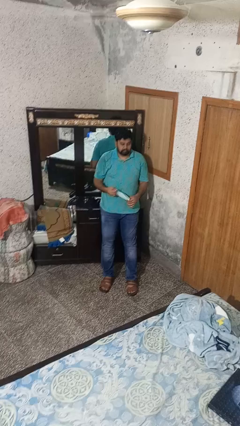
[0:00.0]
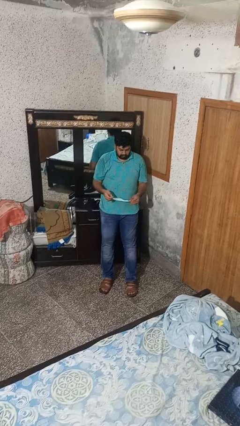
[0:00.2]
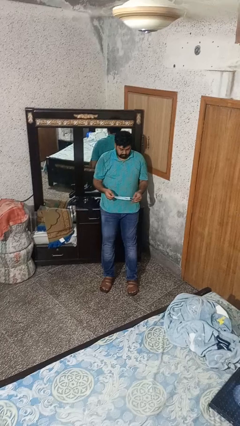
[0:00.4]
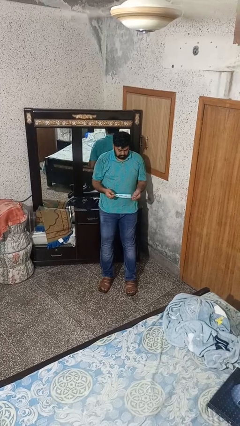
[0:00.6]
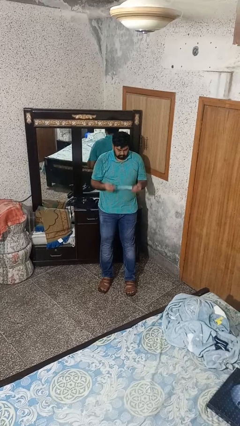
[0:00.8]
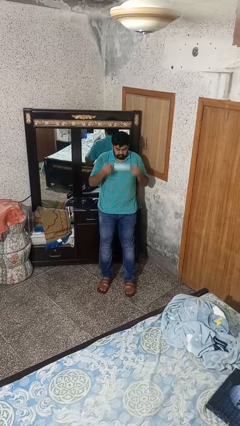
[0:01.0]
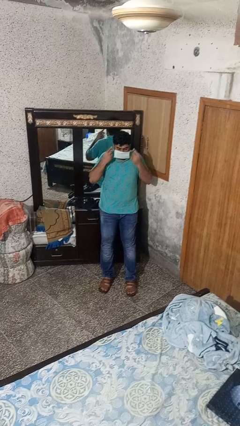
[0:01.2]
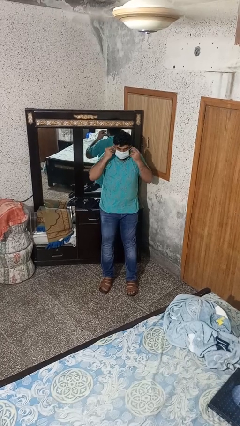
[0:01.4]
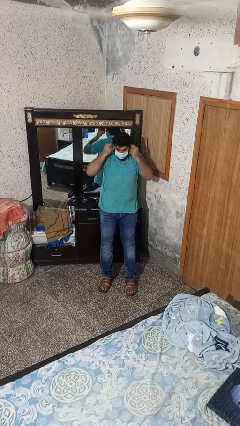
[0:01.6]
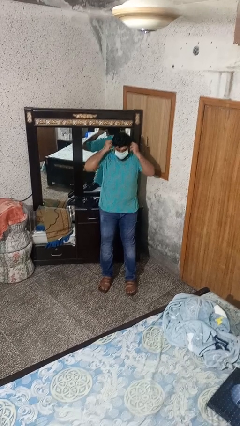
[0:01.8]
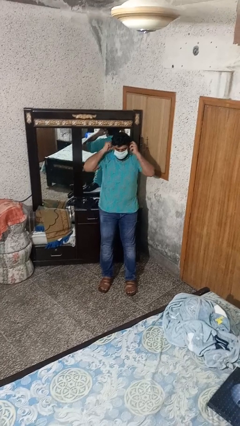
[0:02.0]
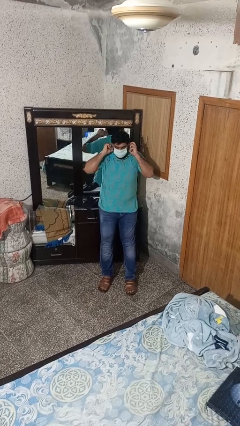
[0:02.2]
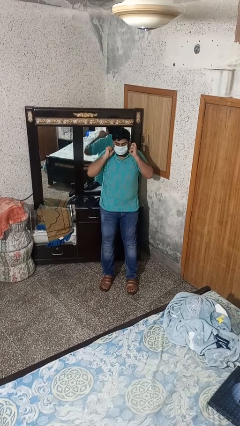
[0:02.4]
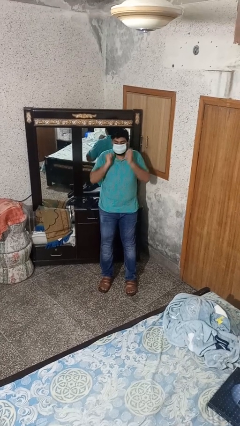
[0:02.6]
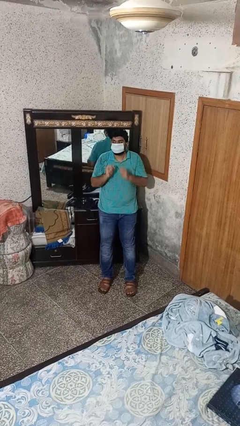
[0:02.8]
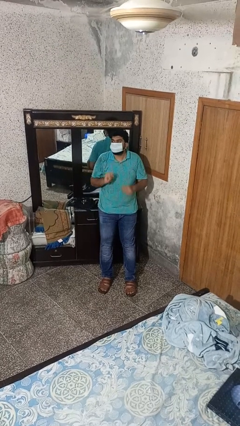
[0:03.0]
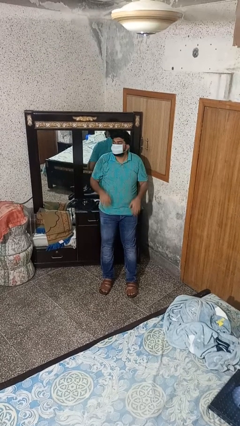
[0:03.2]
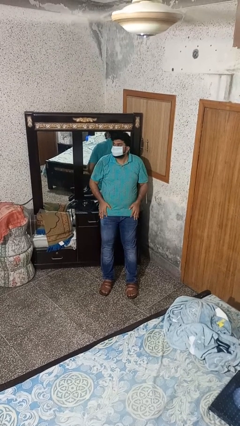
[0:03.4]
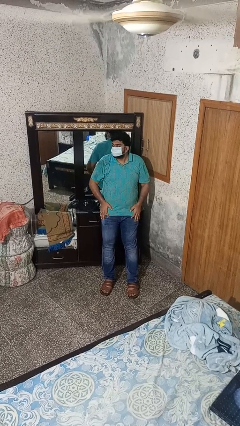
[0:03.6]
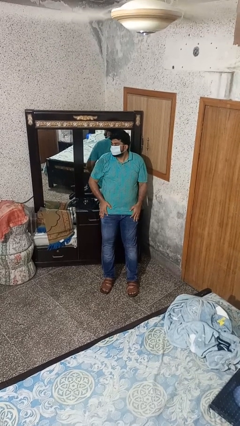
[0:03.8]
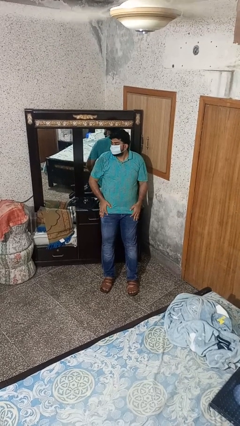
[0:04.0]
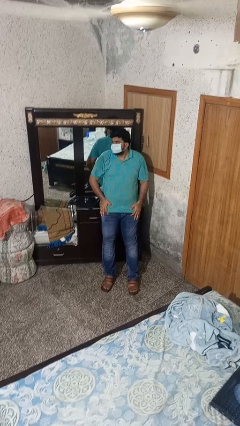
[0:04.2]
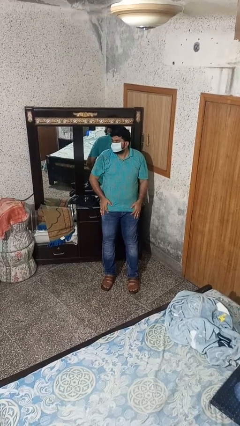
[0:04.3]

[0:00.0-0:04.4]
person puts on facemask

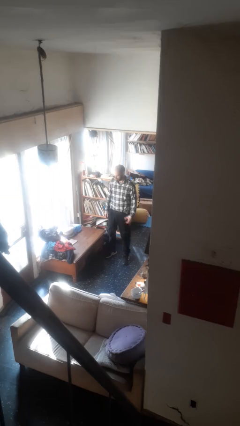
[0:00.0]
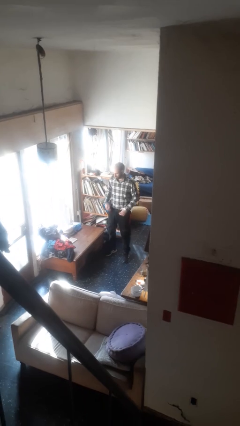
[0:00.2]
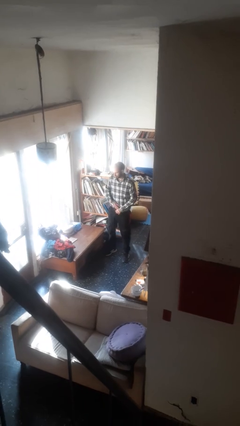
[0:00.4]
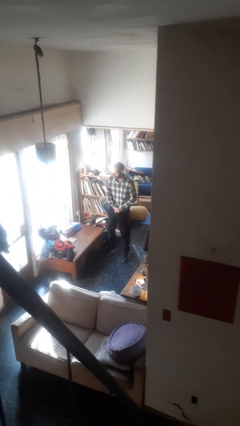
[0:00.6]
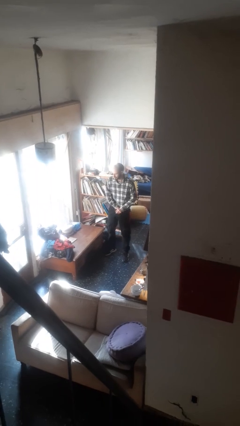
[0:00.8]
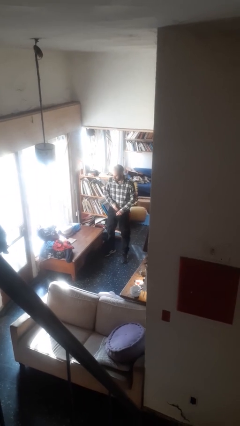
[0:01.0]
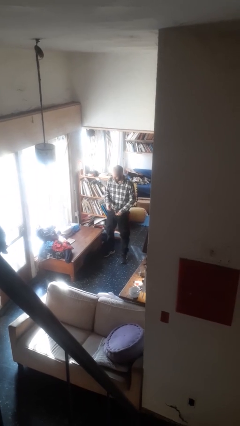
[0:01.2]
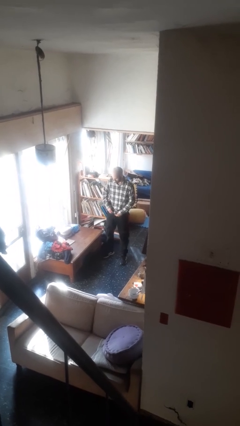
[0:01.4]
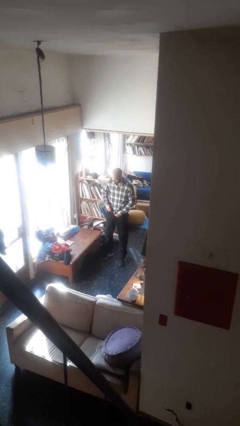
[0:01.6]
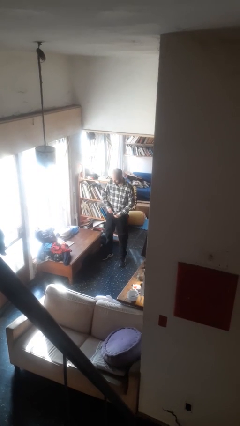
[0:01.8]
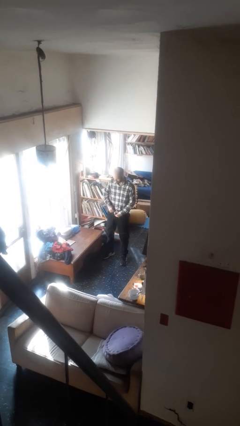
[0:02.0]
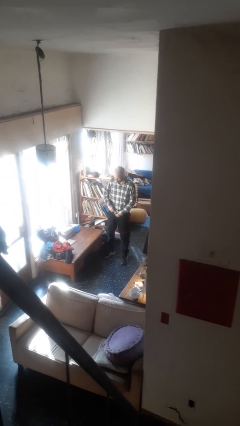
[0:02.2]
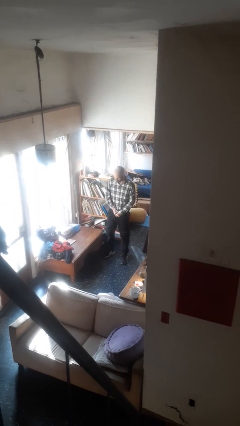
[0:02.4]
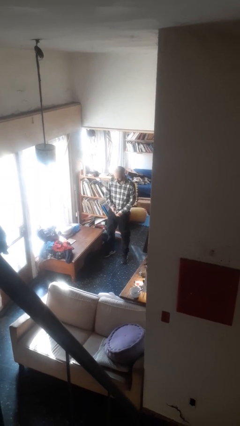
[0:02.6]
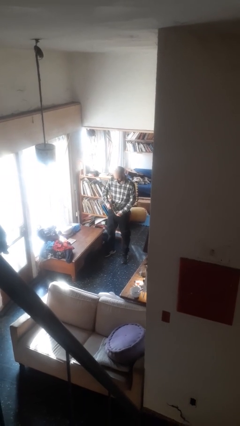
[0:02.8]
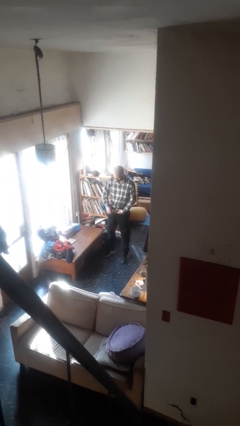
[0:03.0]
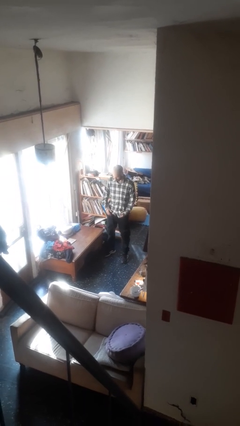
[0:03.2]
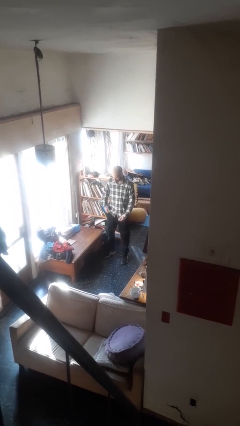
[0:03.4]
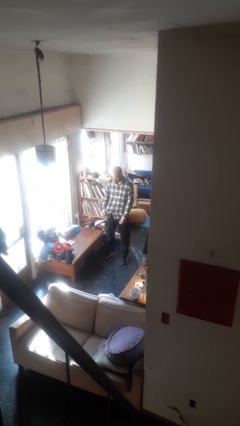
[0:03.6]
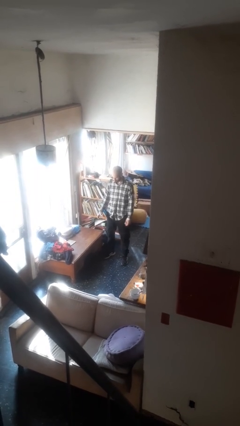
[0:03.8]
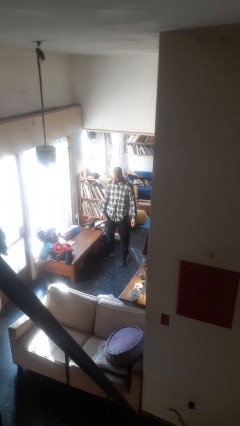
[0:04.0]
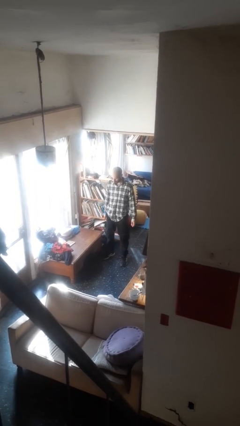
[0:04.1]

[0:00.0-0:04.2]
person untucks shirt

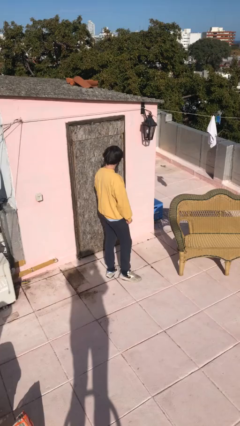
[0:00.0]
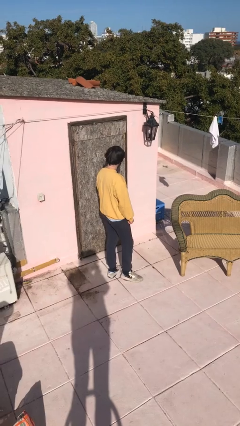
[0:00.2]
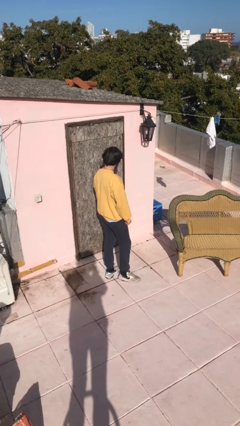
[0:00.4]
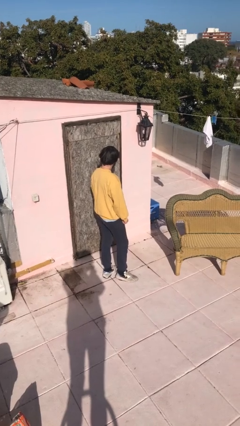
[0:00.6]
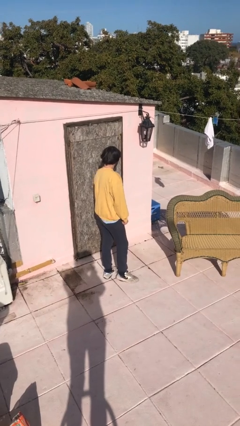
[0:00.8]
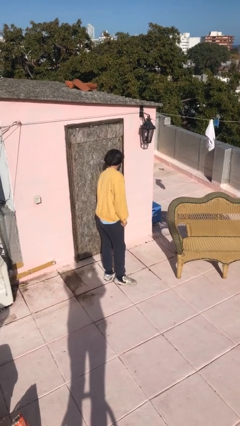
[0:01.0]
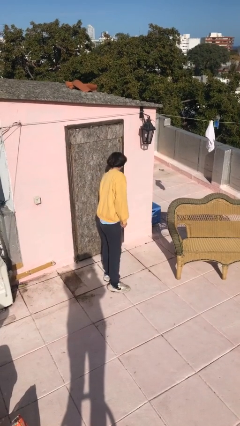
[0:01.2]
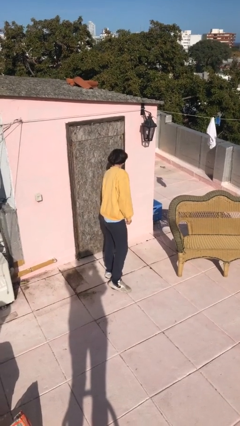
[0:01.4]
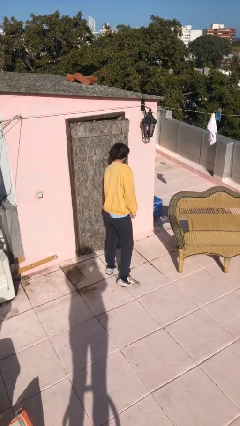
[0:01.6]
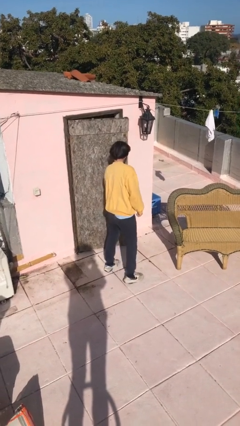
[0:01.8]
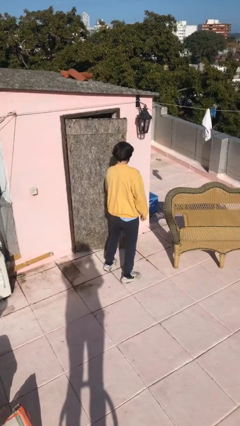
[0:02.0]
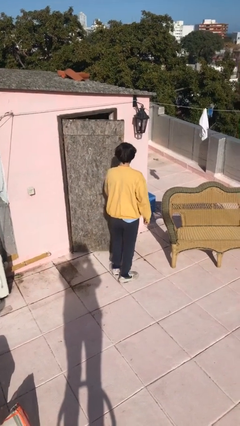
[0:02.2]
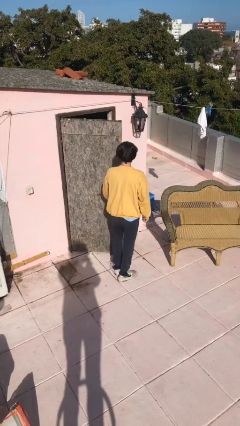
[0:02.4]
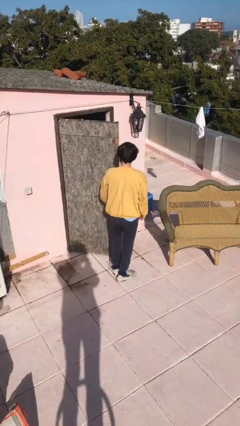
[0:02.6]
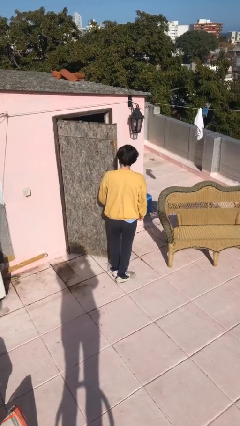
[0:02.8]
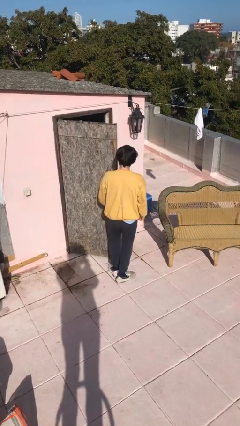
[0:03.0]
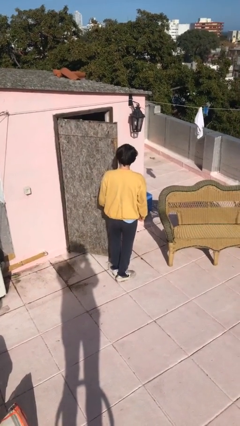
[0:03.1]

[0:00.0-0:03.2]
person opens facility door

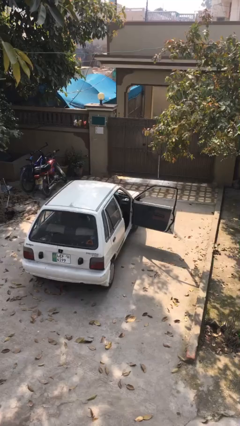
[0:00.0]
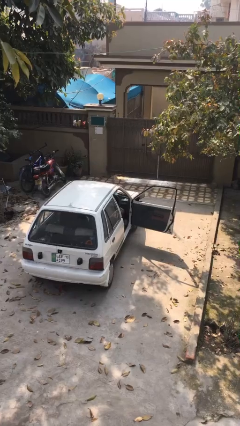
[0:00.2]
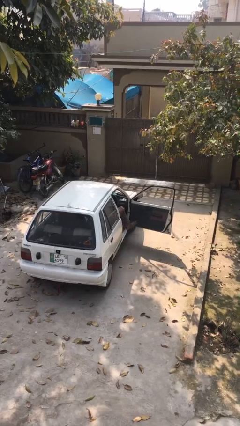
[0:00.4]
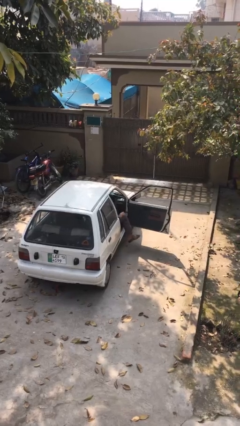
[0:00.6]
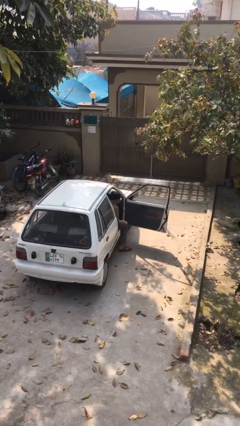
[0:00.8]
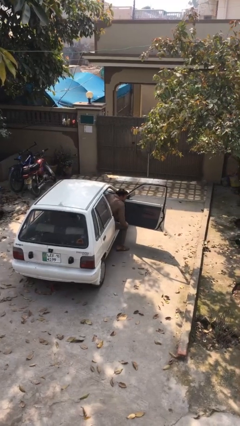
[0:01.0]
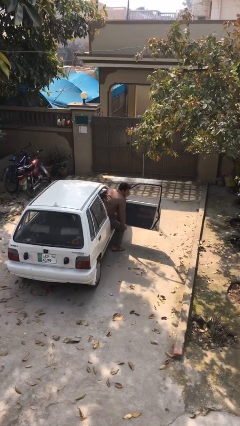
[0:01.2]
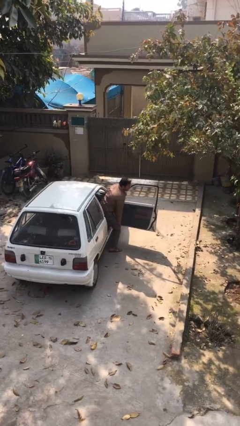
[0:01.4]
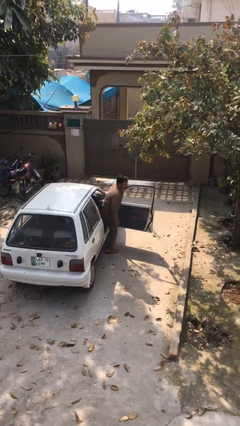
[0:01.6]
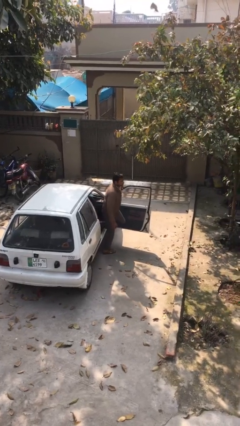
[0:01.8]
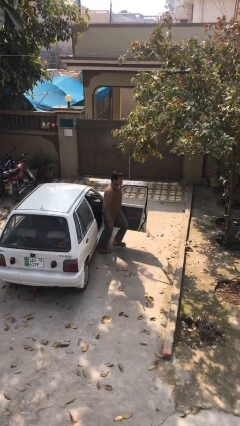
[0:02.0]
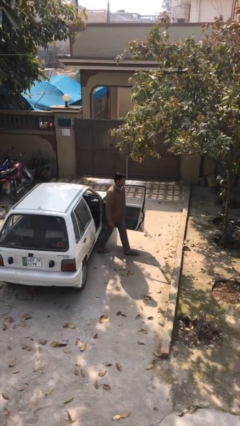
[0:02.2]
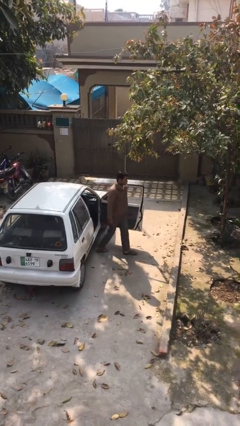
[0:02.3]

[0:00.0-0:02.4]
person exits car

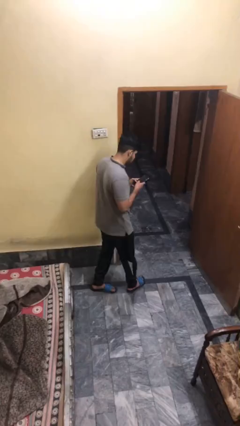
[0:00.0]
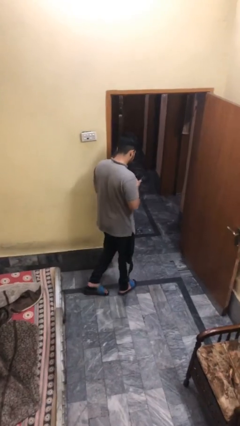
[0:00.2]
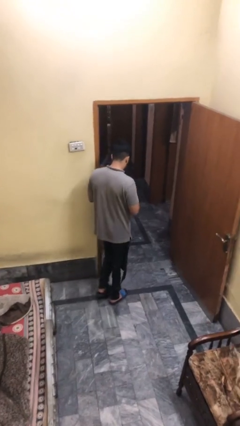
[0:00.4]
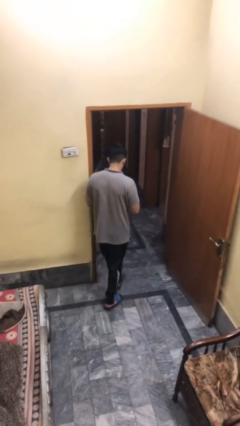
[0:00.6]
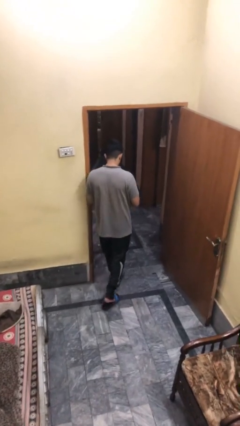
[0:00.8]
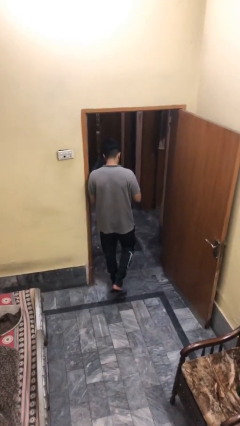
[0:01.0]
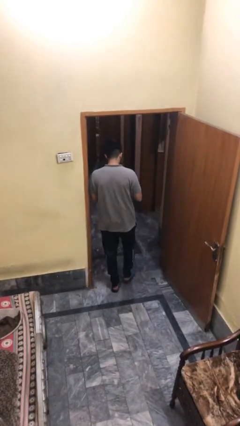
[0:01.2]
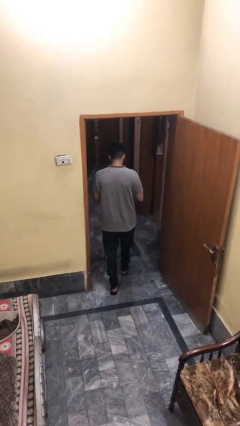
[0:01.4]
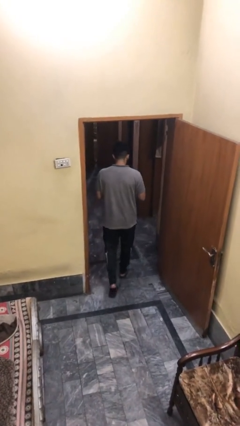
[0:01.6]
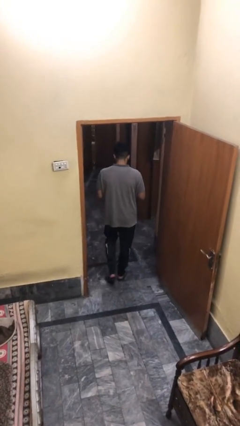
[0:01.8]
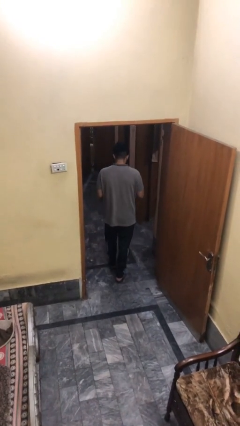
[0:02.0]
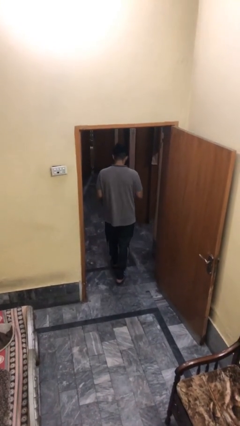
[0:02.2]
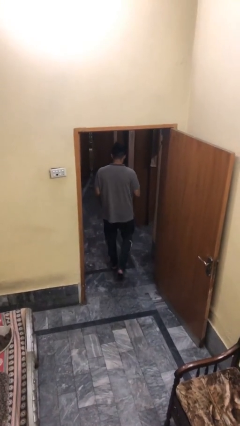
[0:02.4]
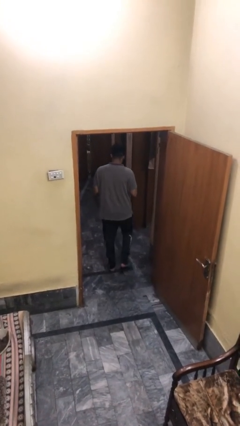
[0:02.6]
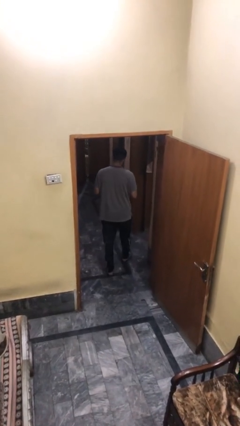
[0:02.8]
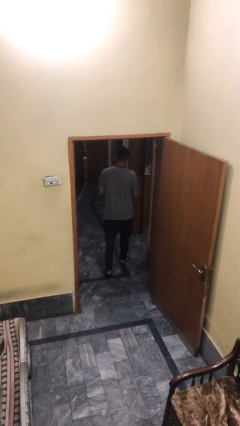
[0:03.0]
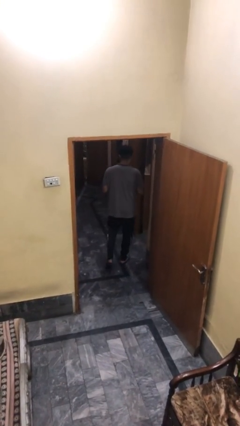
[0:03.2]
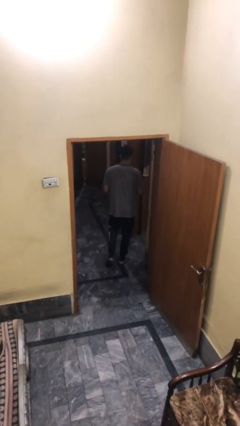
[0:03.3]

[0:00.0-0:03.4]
person exits scene through structure

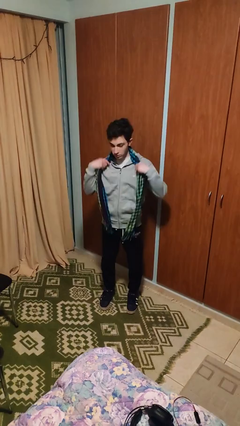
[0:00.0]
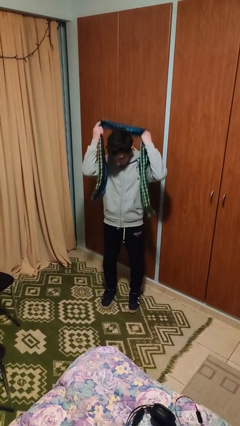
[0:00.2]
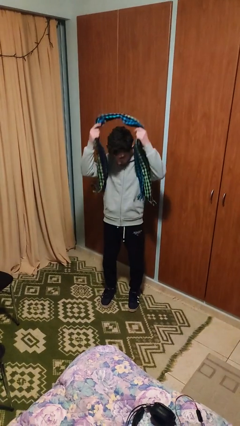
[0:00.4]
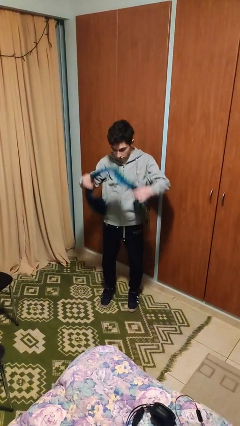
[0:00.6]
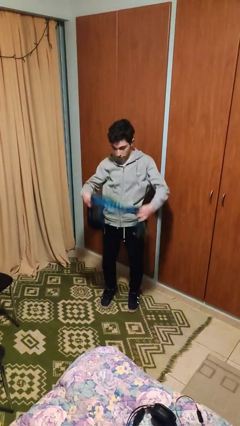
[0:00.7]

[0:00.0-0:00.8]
person takes off scarf
